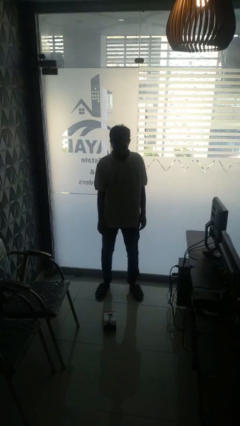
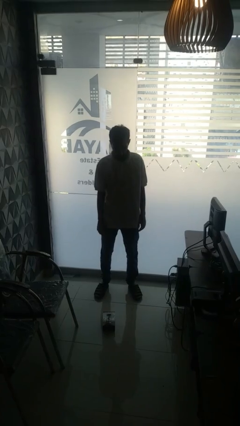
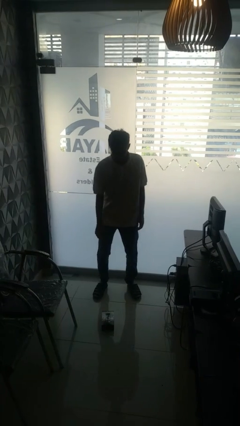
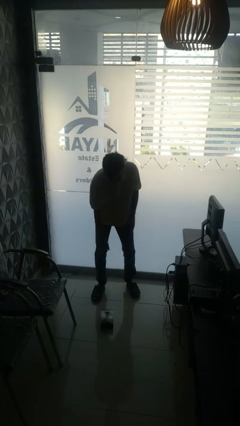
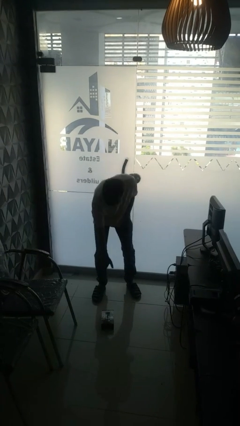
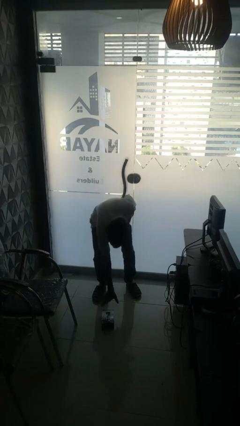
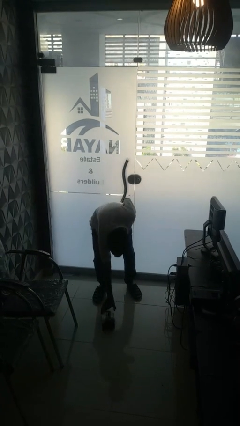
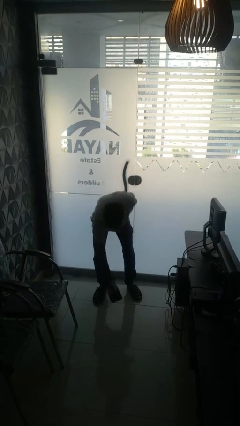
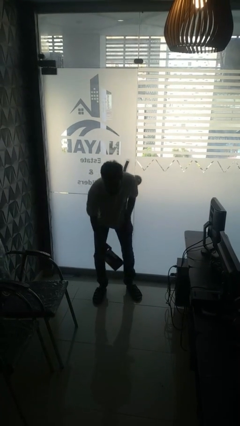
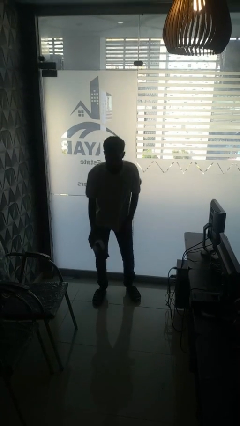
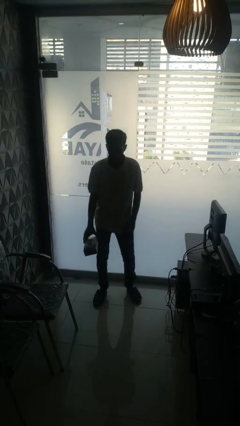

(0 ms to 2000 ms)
person picks up object from floor

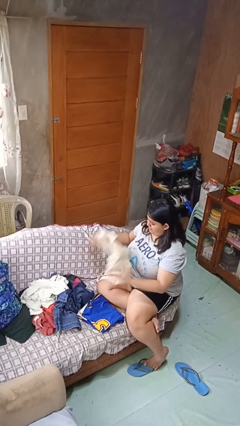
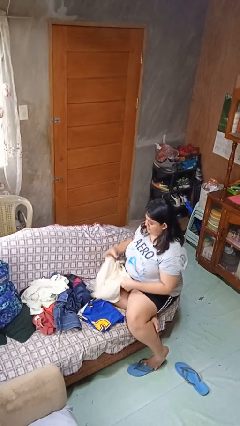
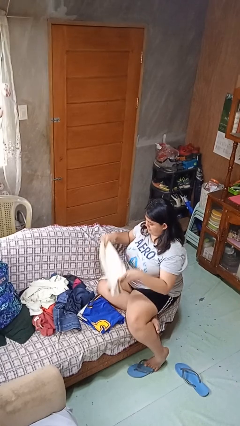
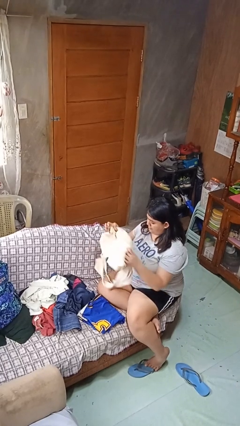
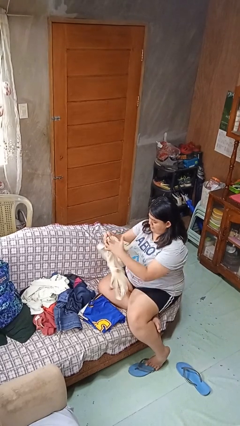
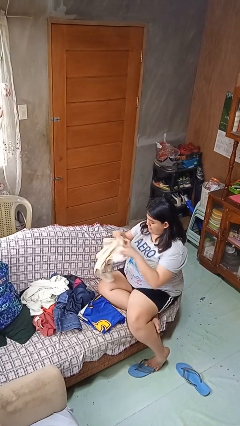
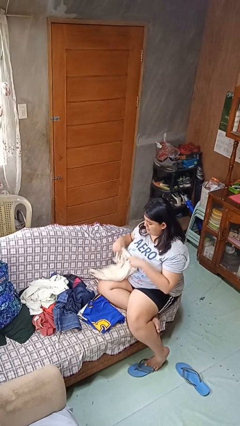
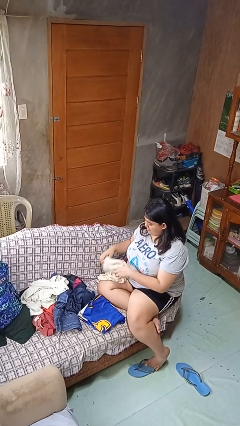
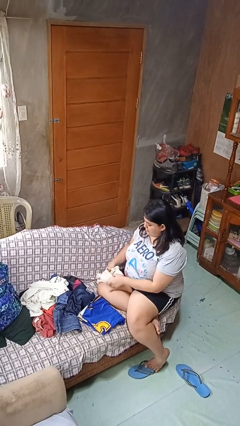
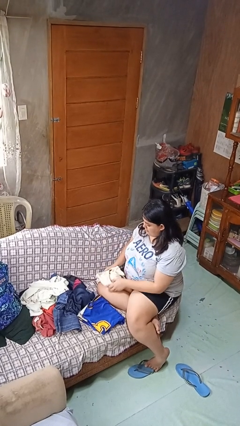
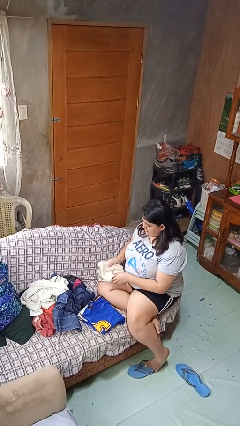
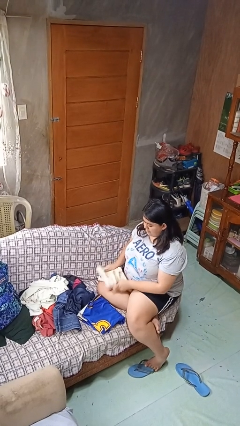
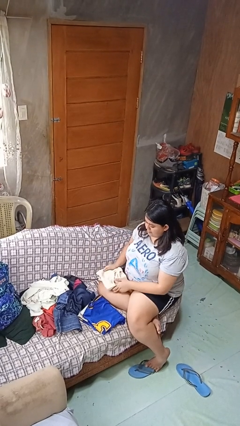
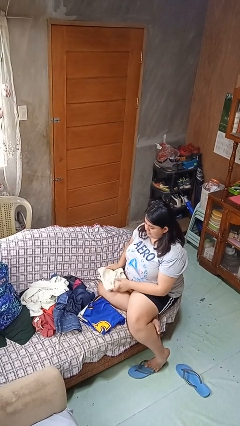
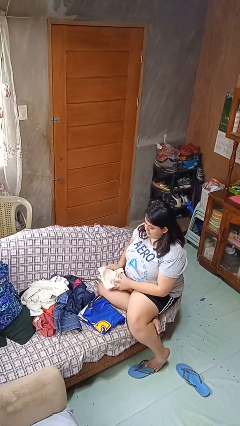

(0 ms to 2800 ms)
person folds shirt

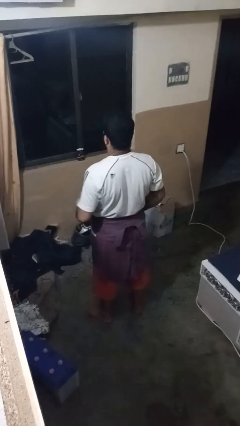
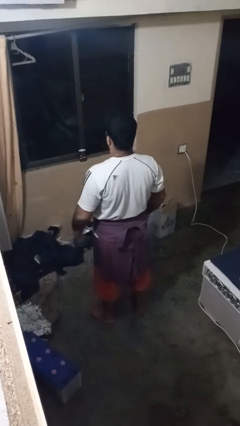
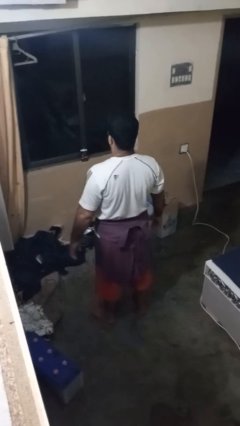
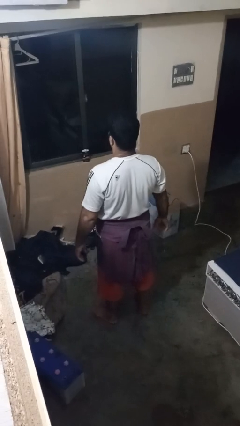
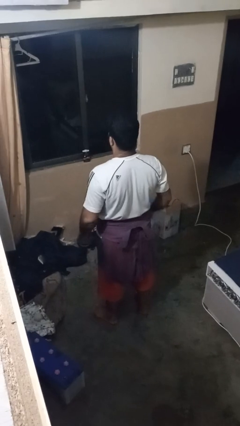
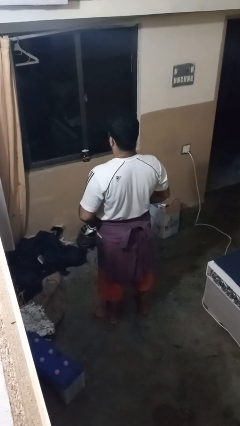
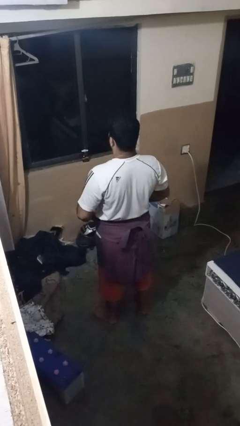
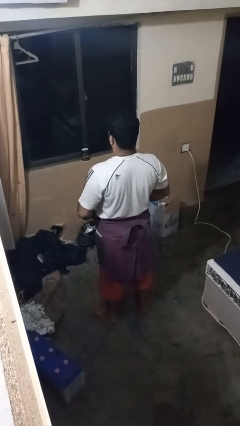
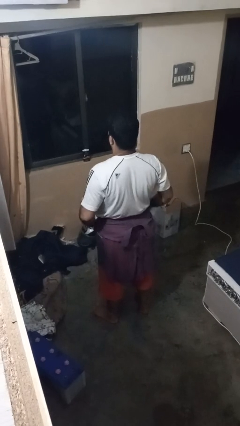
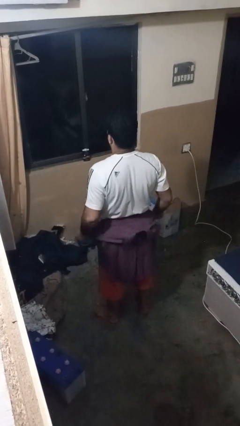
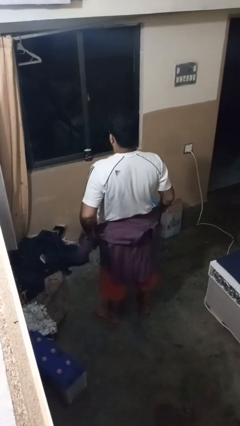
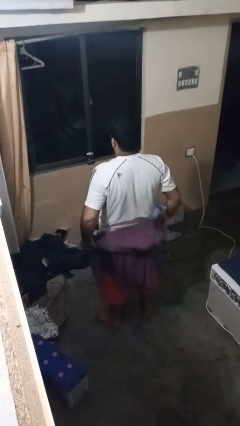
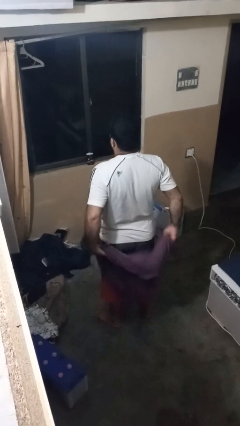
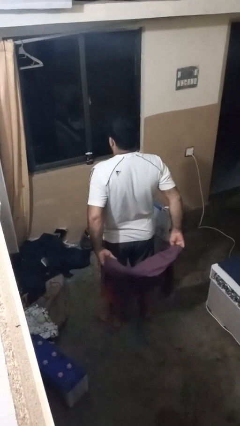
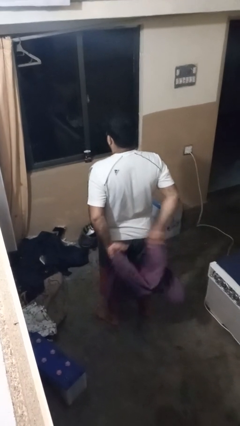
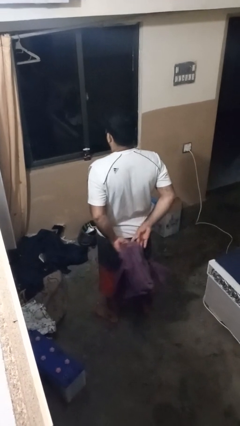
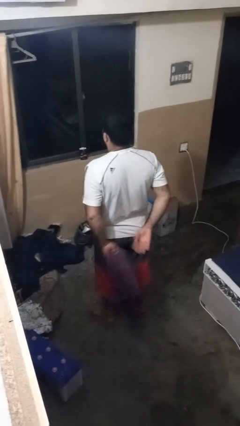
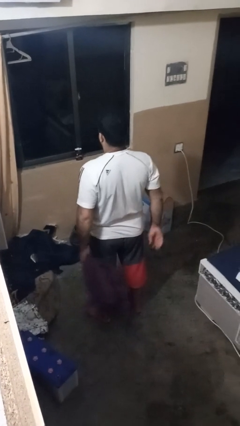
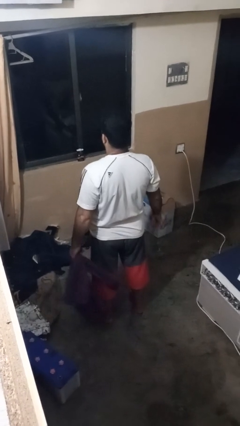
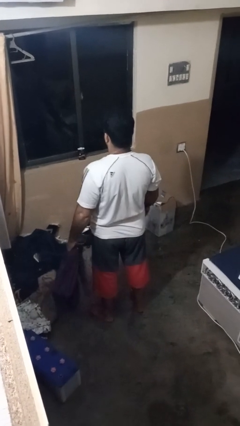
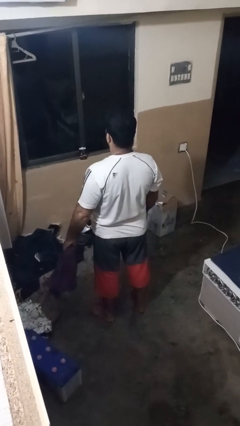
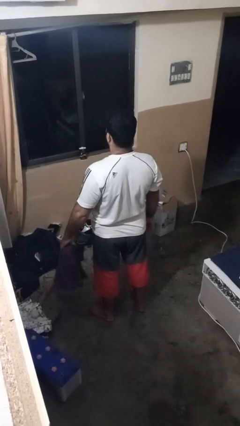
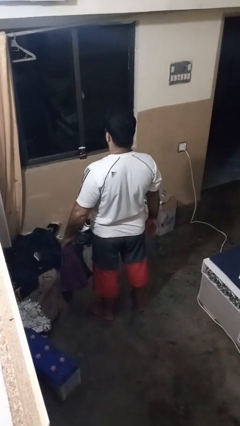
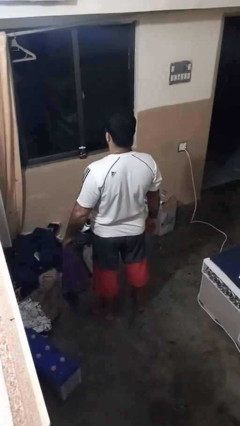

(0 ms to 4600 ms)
person unties jacket around waist

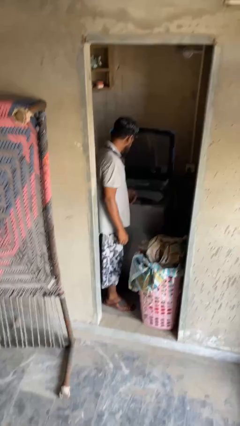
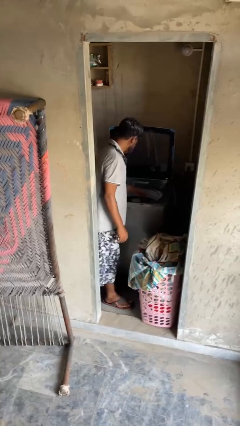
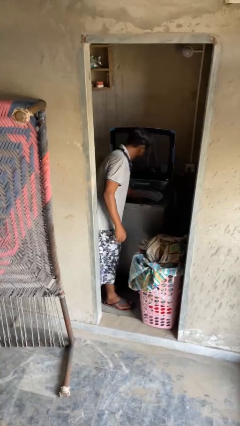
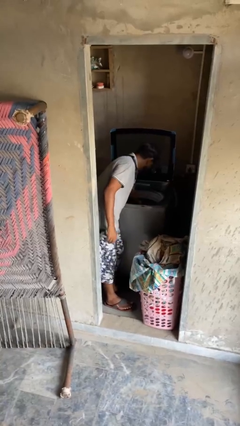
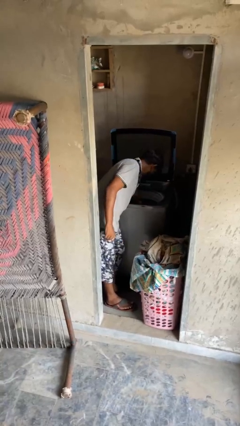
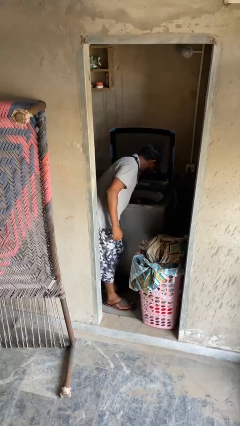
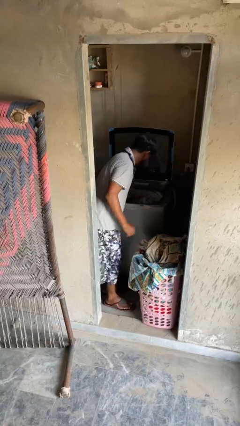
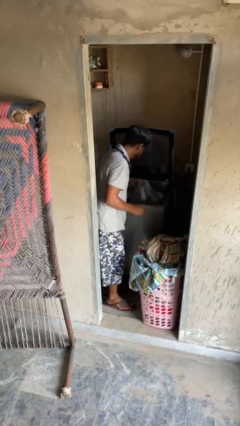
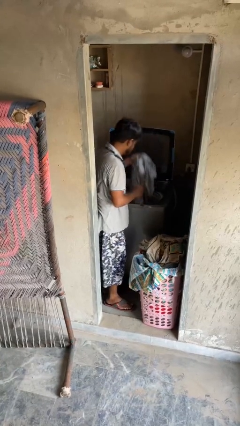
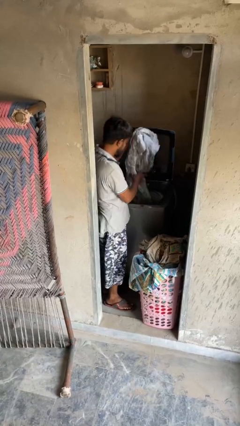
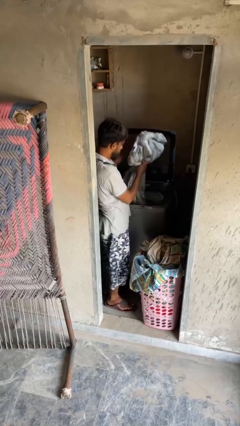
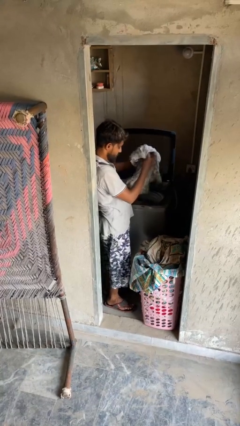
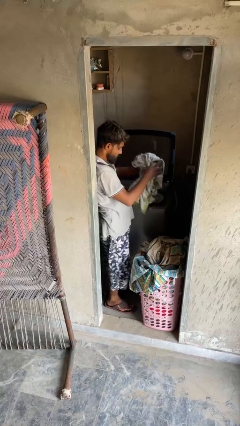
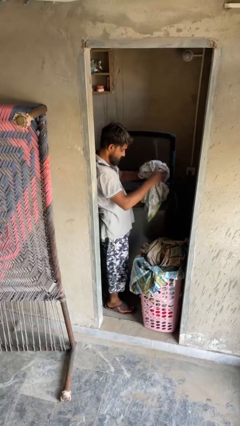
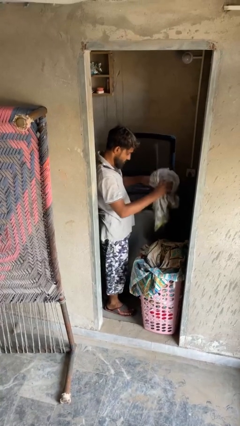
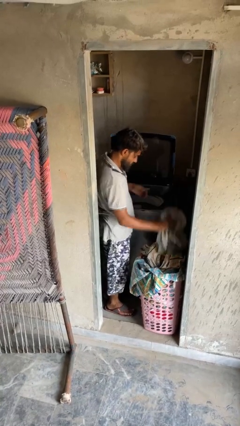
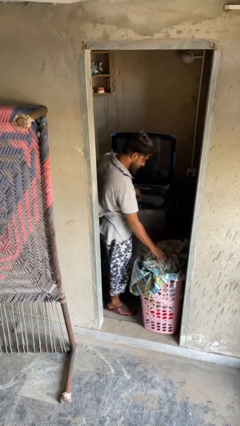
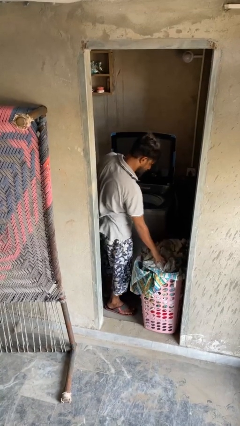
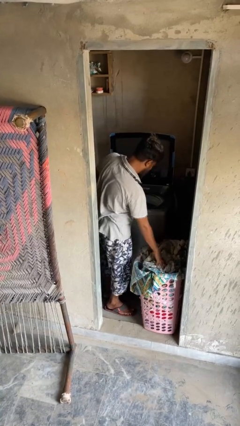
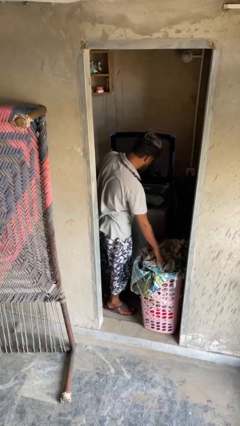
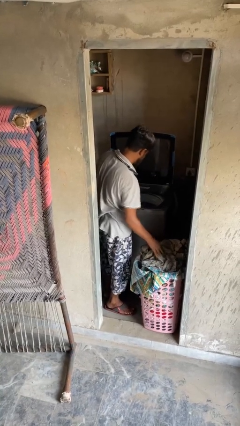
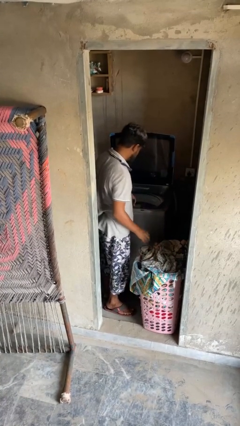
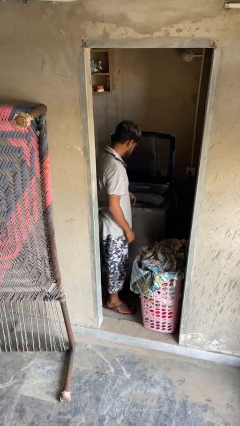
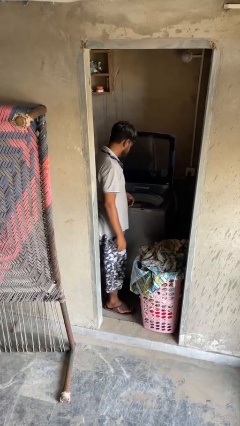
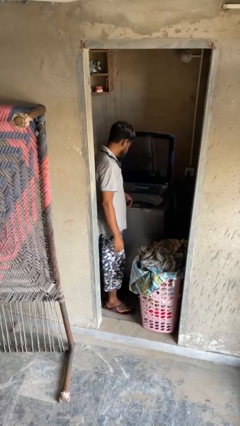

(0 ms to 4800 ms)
person loads clotheswasher

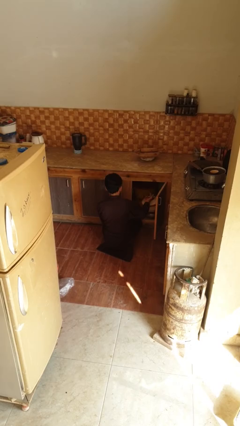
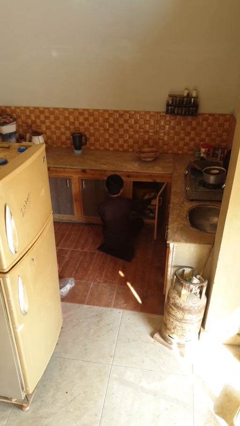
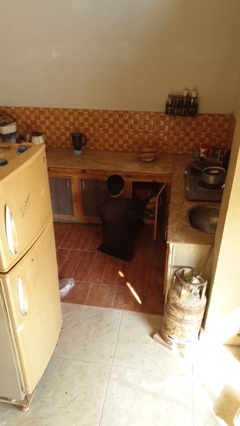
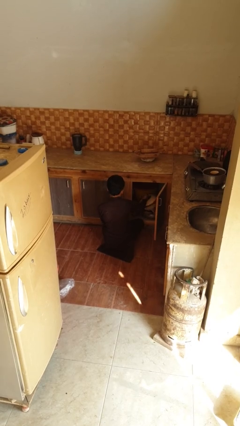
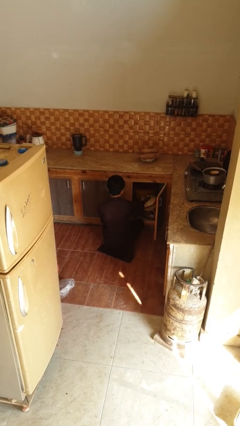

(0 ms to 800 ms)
person puts object into kitchen drawer

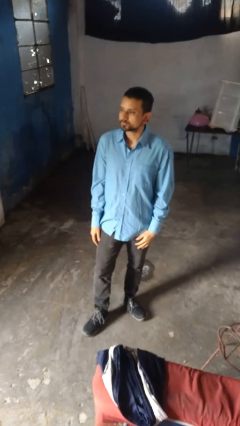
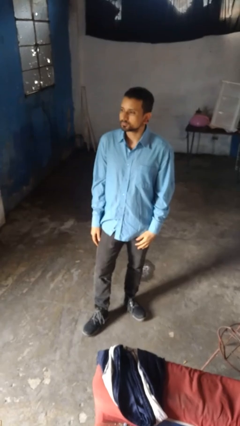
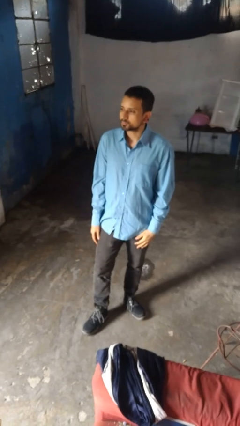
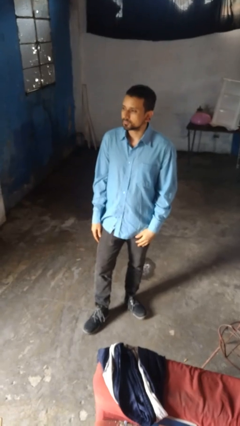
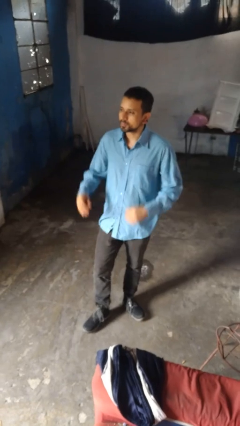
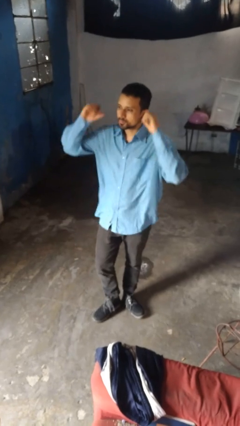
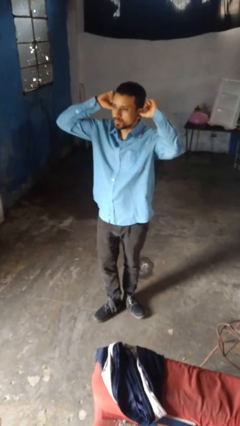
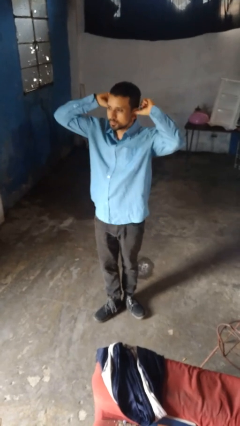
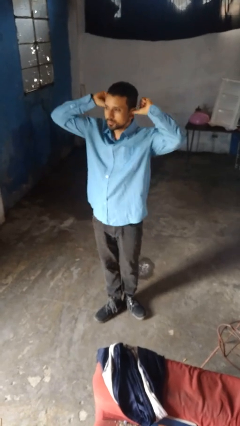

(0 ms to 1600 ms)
person puts fingers in ear

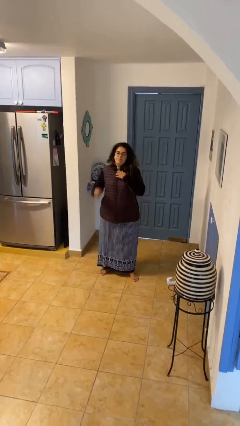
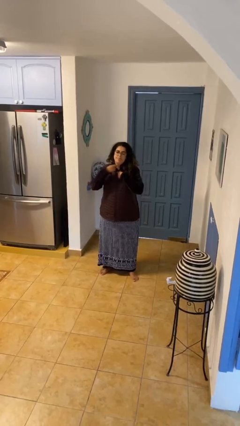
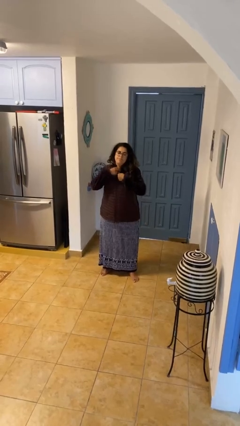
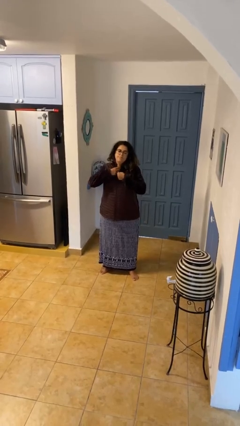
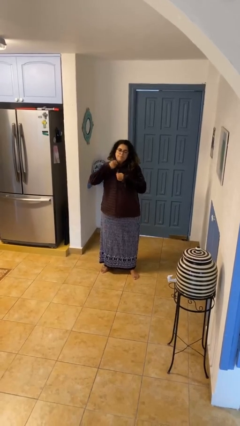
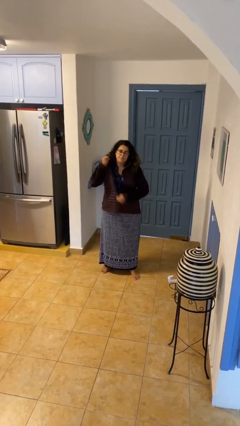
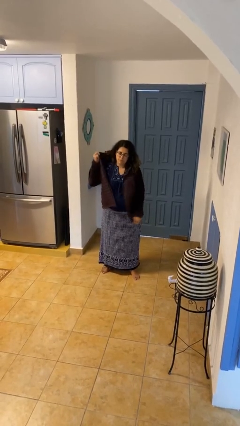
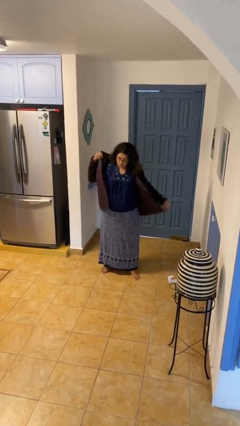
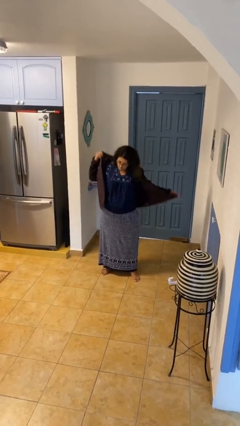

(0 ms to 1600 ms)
person unzips jacket
